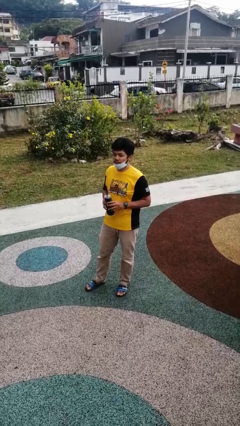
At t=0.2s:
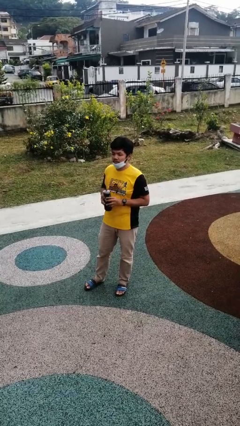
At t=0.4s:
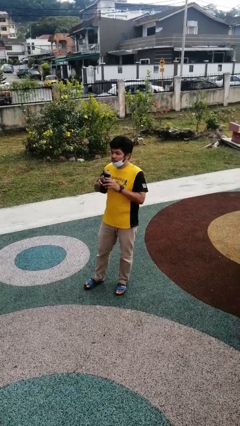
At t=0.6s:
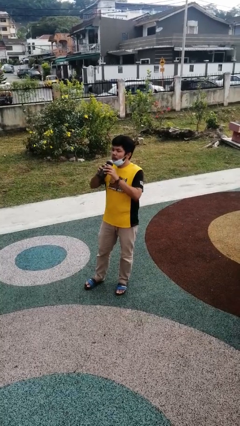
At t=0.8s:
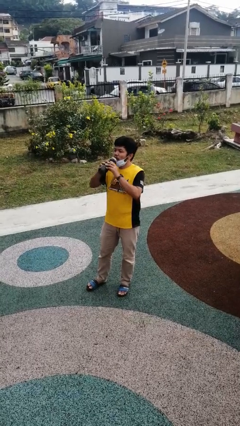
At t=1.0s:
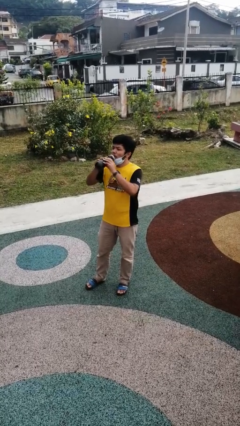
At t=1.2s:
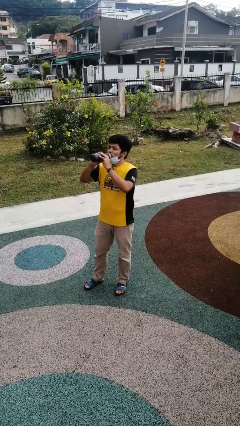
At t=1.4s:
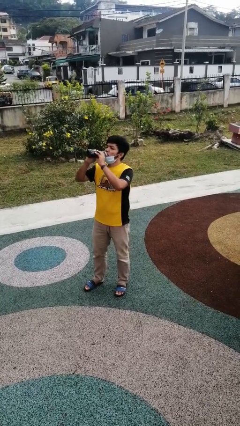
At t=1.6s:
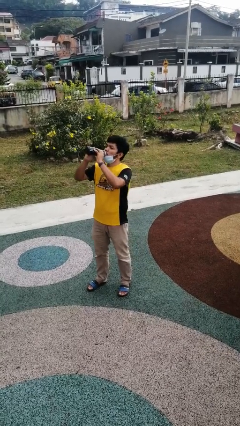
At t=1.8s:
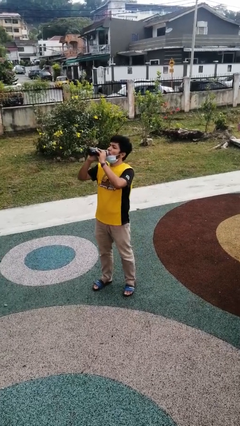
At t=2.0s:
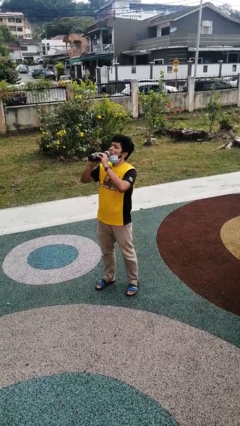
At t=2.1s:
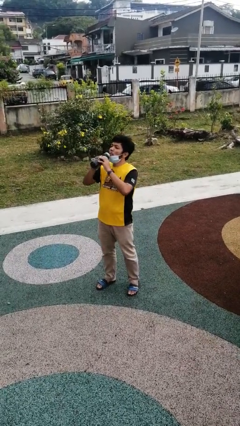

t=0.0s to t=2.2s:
person drinks from bottle

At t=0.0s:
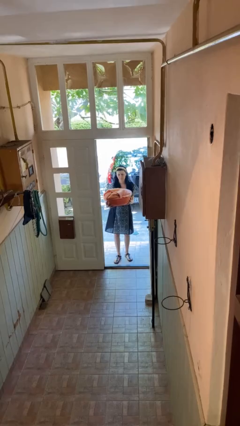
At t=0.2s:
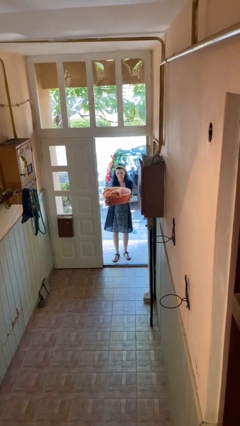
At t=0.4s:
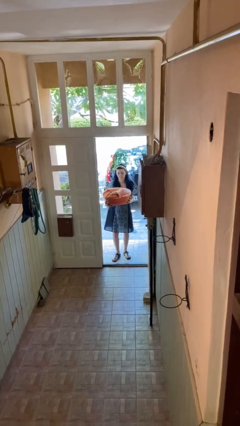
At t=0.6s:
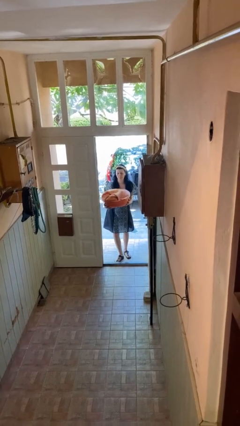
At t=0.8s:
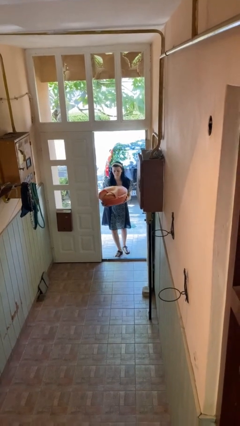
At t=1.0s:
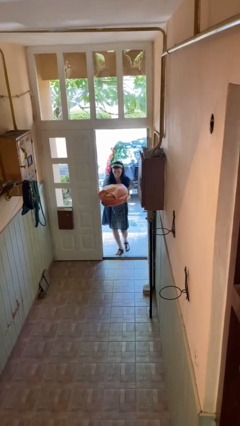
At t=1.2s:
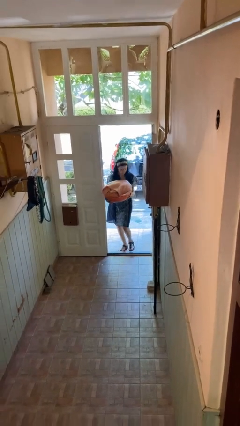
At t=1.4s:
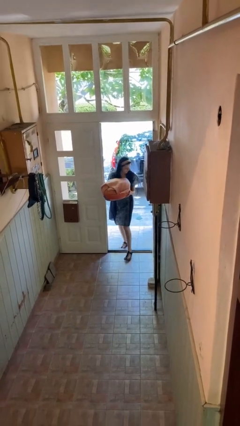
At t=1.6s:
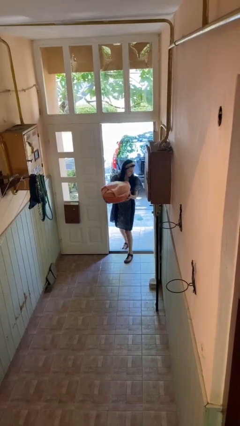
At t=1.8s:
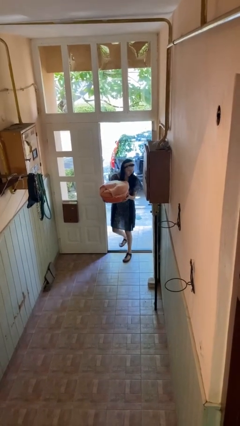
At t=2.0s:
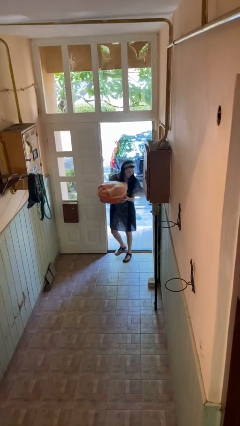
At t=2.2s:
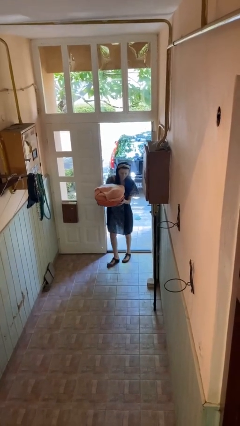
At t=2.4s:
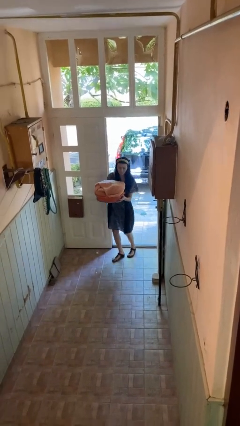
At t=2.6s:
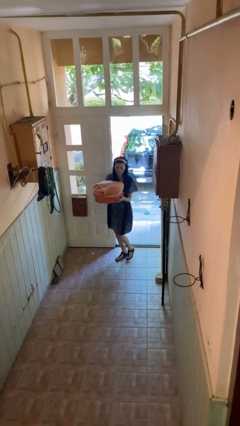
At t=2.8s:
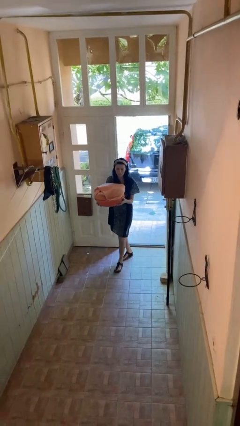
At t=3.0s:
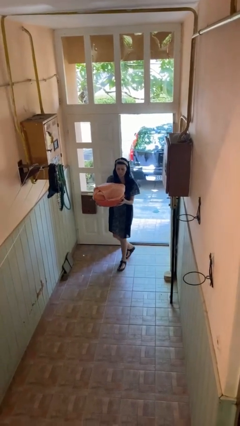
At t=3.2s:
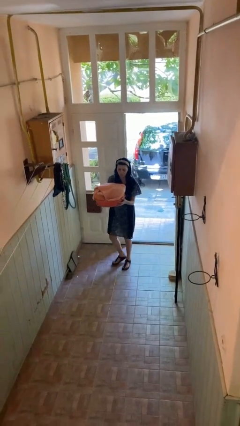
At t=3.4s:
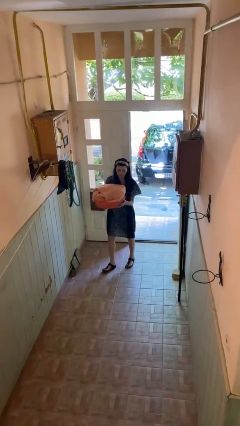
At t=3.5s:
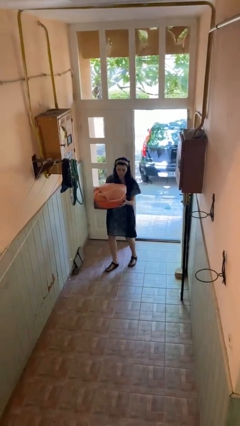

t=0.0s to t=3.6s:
person carries laundry basket

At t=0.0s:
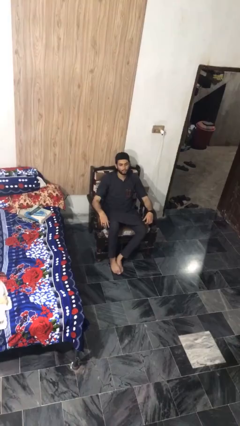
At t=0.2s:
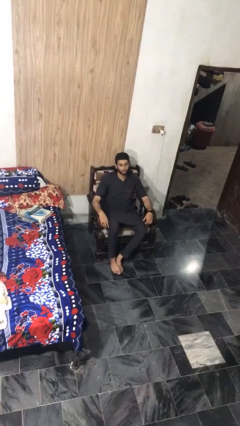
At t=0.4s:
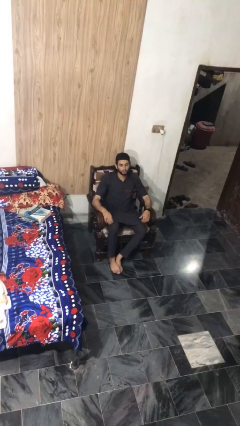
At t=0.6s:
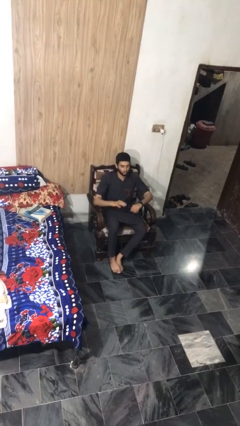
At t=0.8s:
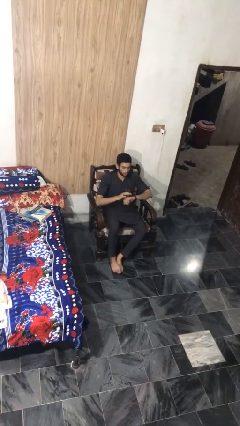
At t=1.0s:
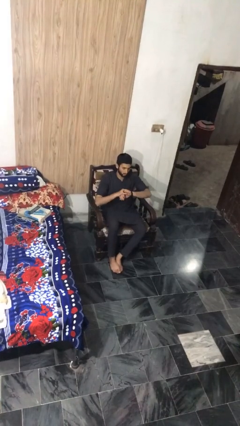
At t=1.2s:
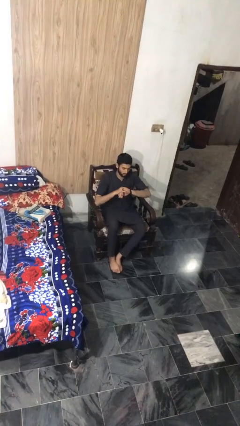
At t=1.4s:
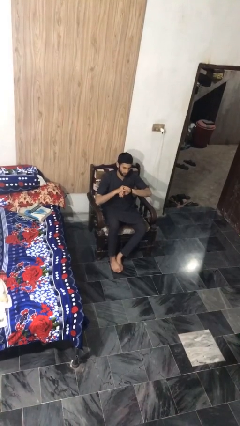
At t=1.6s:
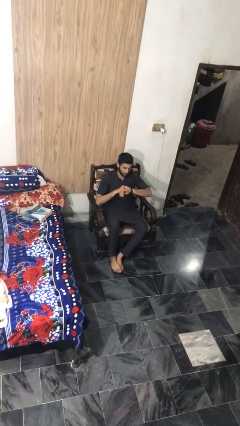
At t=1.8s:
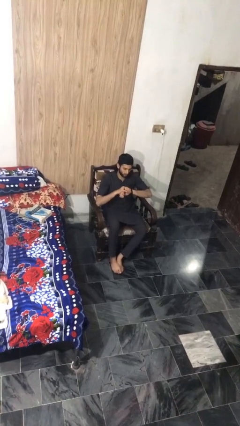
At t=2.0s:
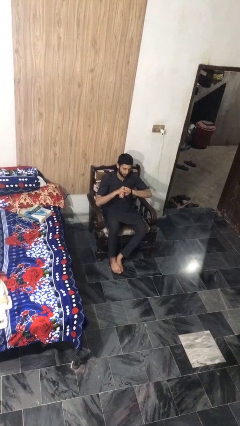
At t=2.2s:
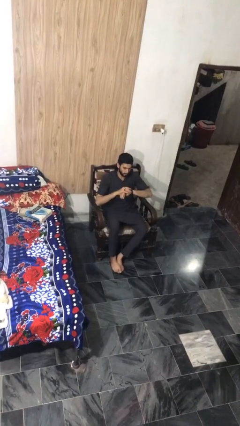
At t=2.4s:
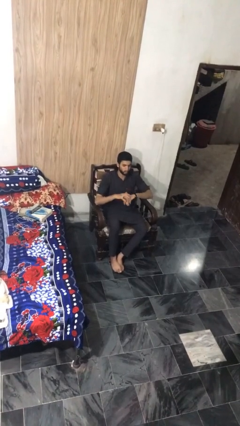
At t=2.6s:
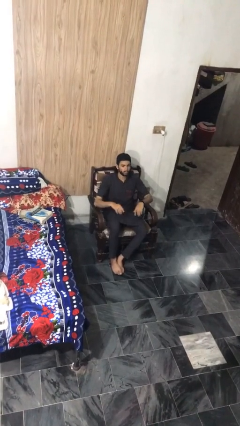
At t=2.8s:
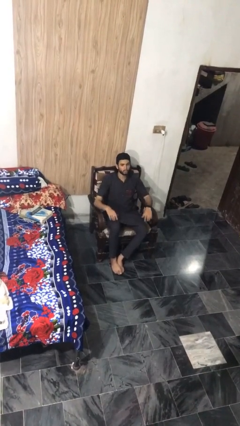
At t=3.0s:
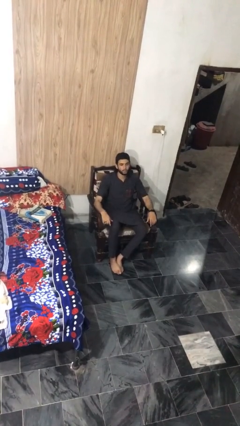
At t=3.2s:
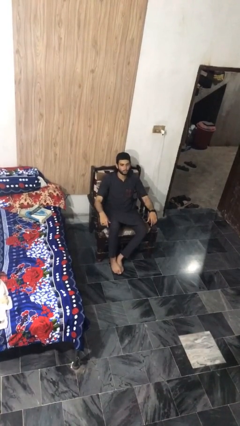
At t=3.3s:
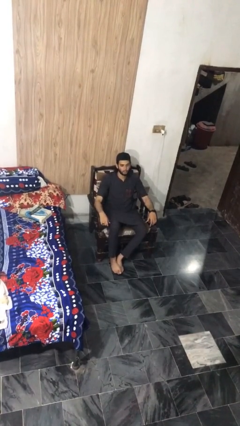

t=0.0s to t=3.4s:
person looks at wristwatch

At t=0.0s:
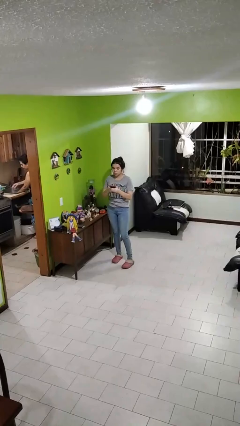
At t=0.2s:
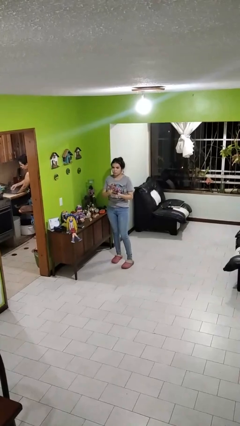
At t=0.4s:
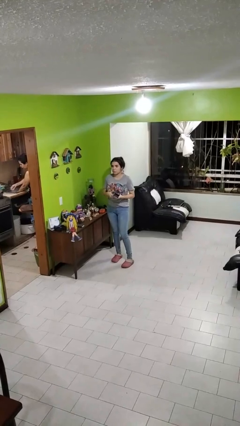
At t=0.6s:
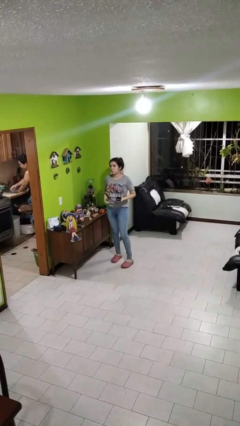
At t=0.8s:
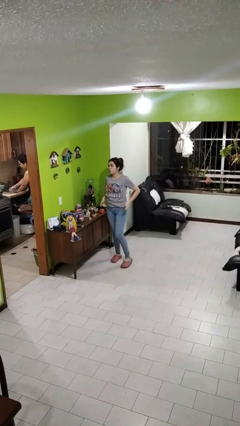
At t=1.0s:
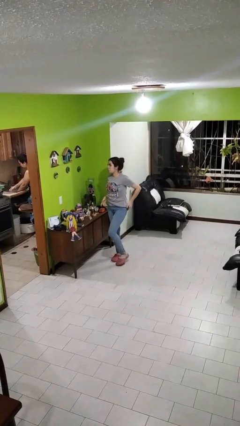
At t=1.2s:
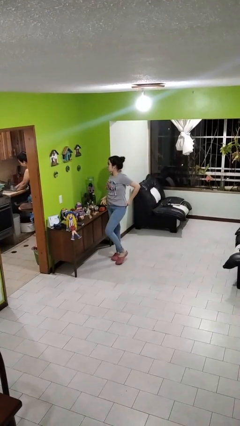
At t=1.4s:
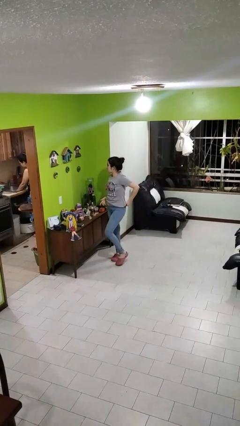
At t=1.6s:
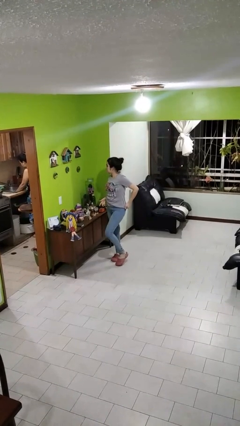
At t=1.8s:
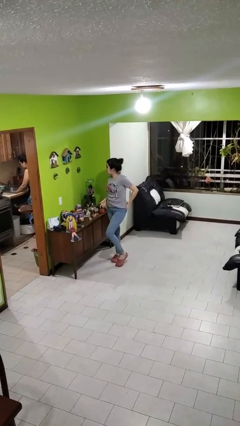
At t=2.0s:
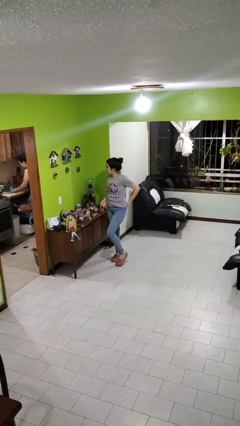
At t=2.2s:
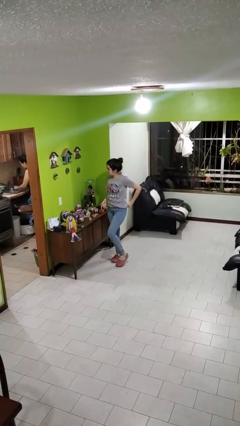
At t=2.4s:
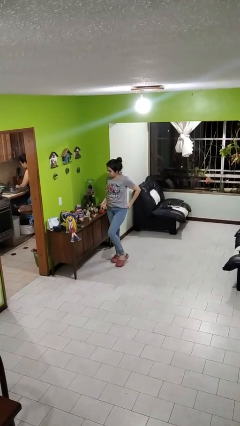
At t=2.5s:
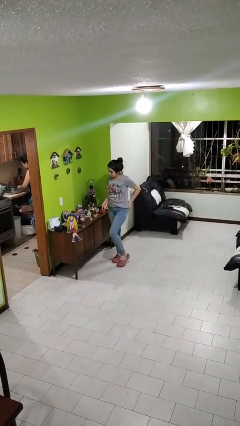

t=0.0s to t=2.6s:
person puts phone into pocket

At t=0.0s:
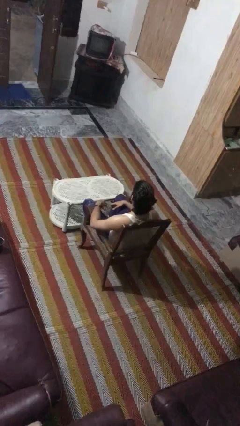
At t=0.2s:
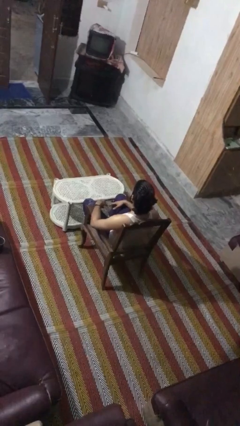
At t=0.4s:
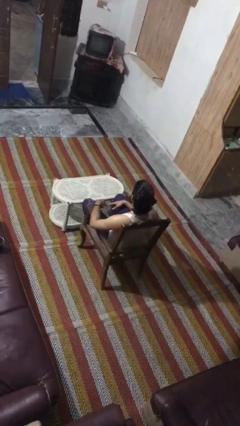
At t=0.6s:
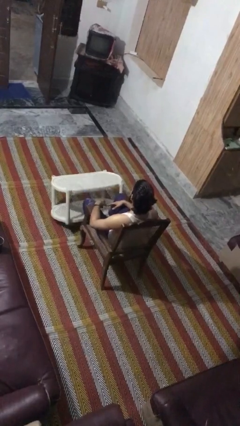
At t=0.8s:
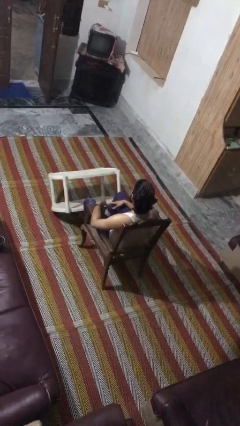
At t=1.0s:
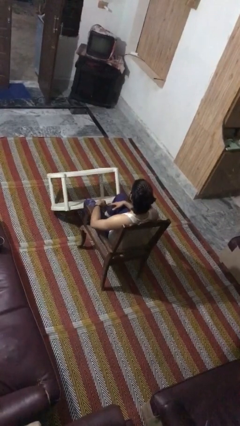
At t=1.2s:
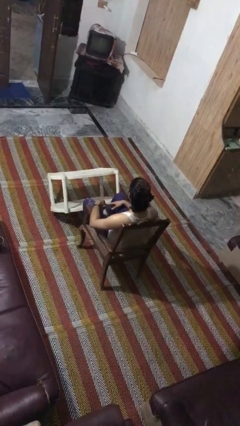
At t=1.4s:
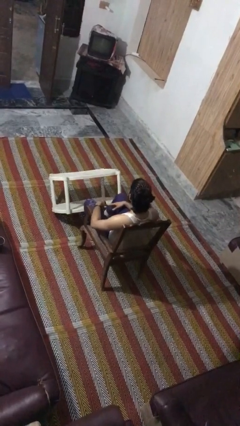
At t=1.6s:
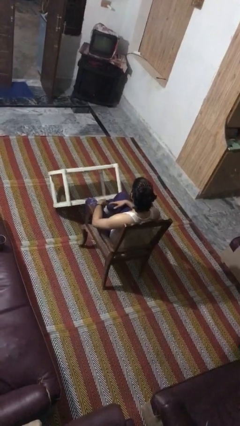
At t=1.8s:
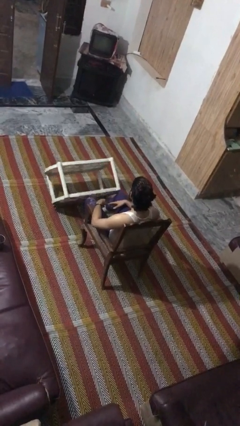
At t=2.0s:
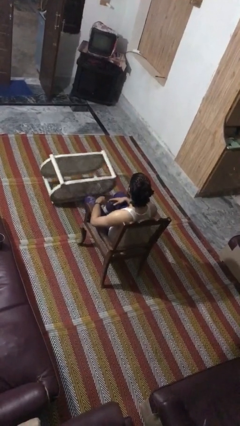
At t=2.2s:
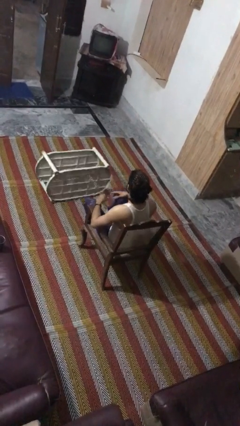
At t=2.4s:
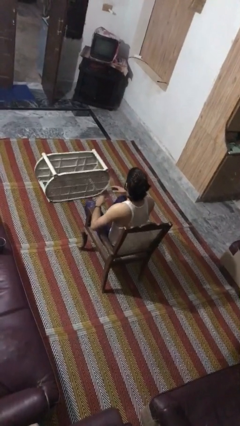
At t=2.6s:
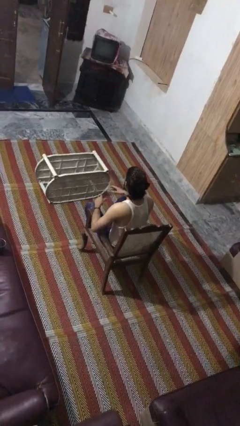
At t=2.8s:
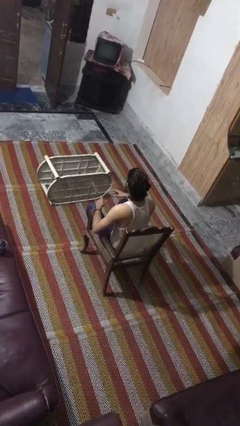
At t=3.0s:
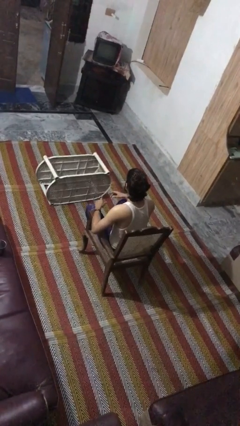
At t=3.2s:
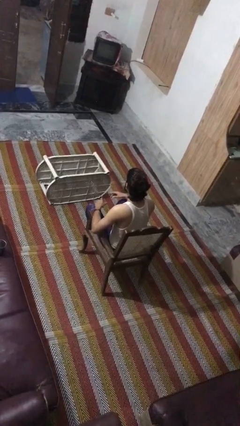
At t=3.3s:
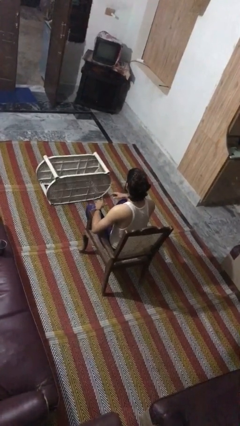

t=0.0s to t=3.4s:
person knocks over furniture

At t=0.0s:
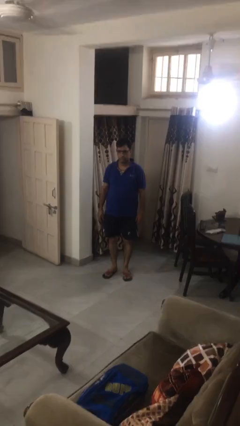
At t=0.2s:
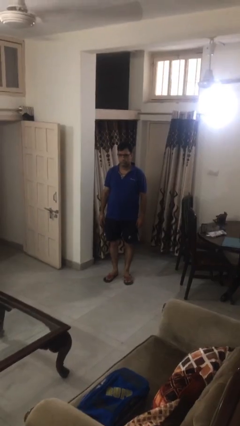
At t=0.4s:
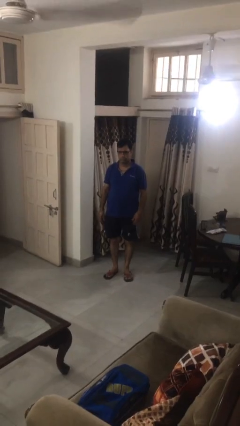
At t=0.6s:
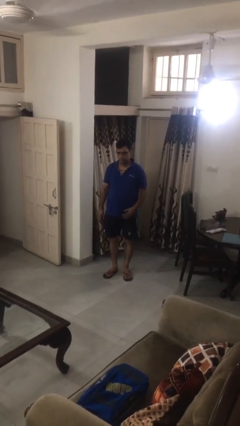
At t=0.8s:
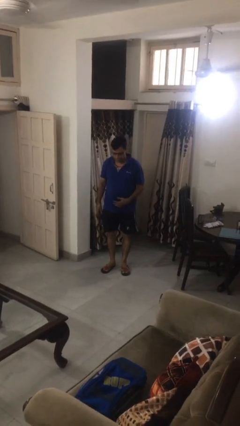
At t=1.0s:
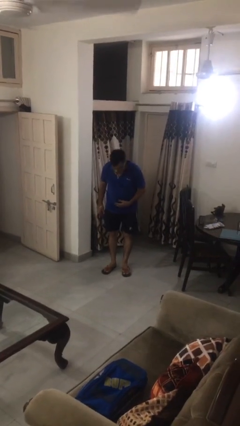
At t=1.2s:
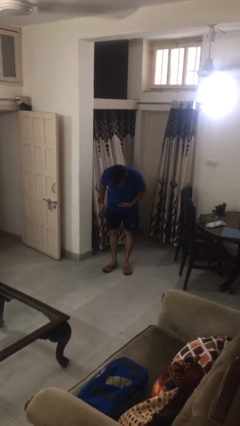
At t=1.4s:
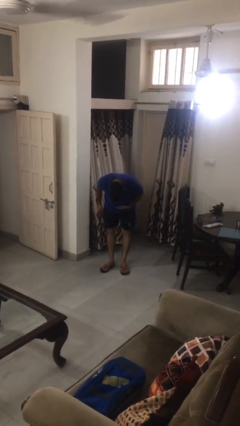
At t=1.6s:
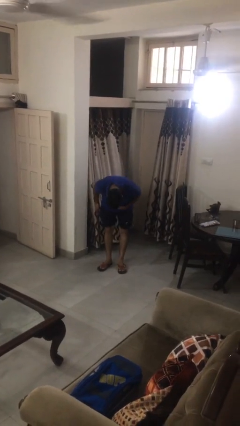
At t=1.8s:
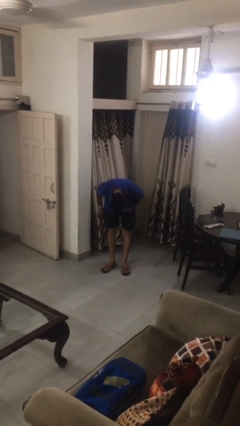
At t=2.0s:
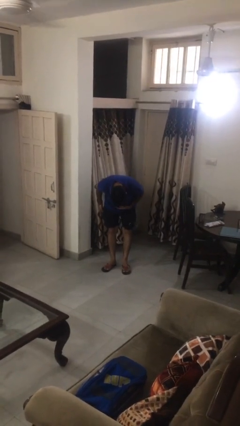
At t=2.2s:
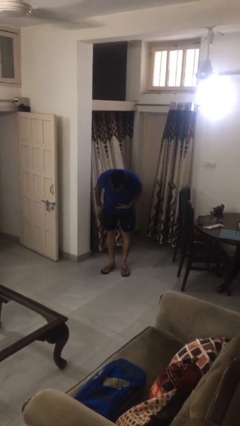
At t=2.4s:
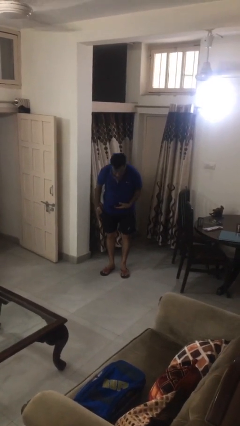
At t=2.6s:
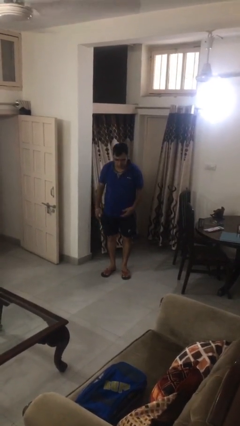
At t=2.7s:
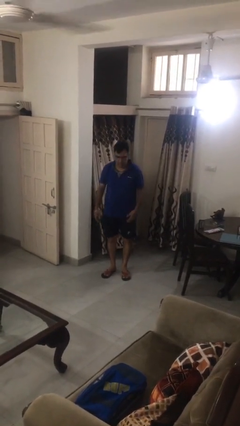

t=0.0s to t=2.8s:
person bows
